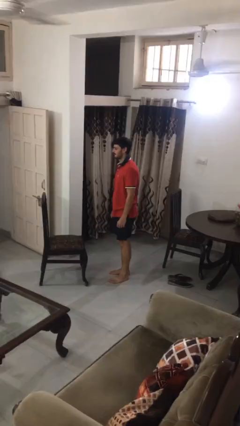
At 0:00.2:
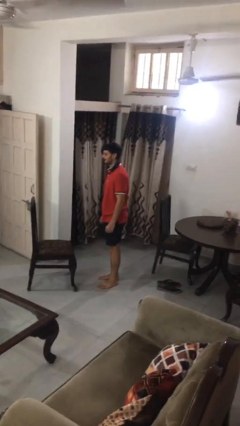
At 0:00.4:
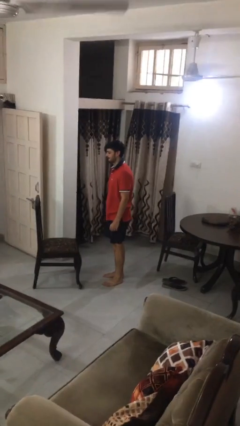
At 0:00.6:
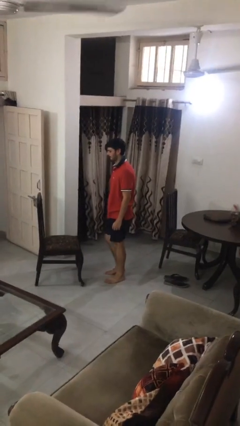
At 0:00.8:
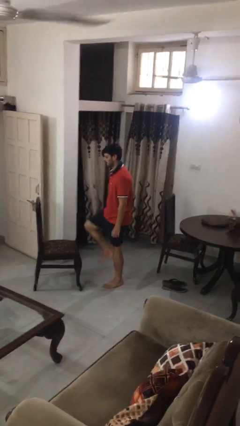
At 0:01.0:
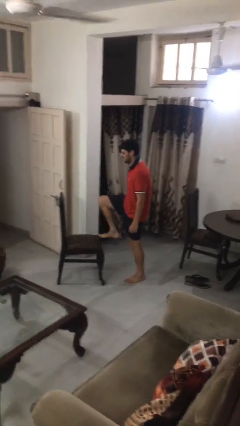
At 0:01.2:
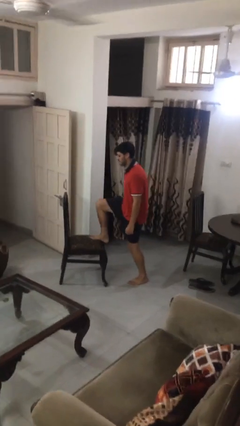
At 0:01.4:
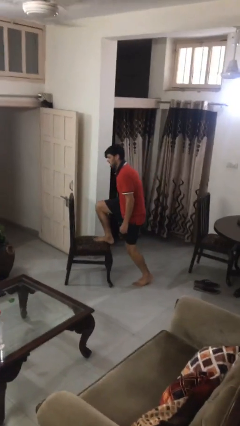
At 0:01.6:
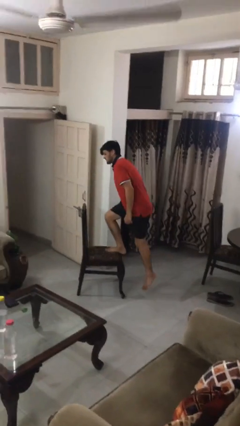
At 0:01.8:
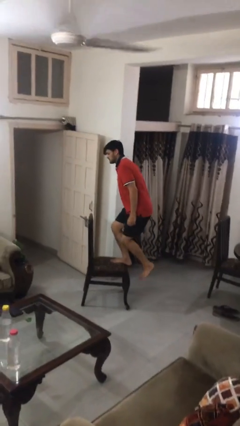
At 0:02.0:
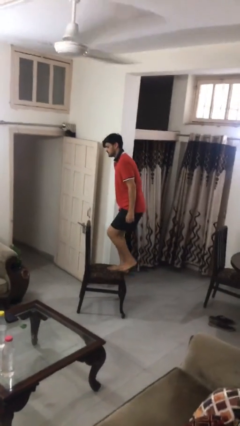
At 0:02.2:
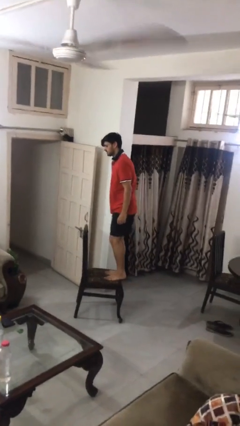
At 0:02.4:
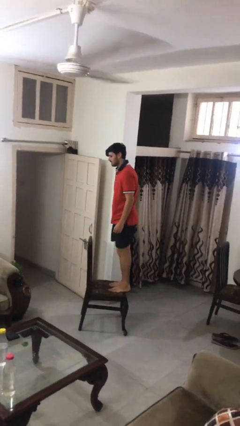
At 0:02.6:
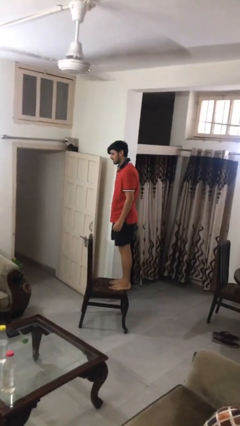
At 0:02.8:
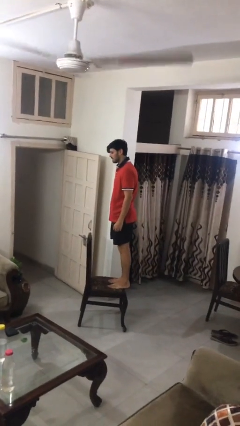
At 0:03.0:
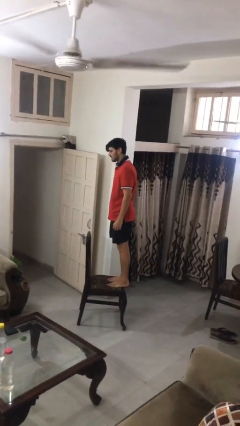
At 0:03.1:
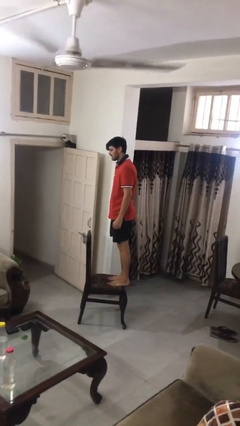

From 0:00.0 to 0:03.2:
person climbs on chair

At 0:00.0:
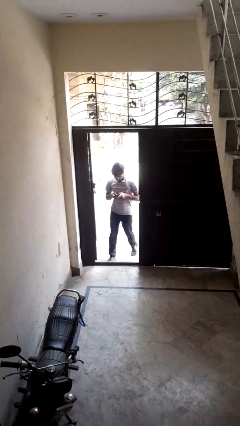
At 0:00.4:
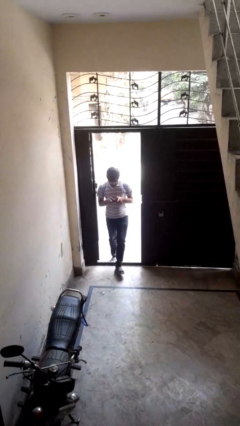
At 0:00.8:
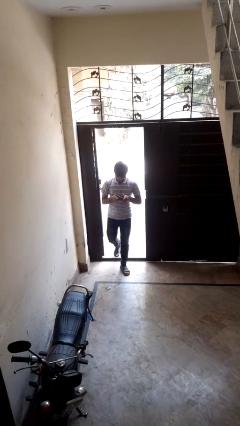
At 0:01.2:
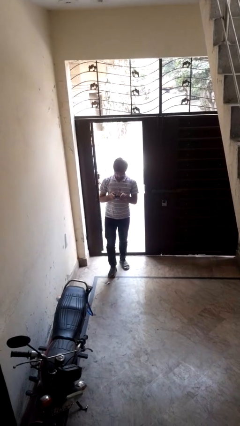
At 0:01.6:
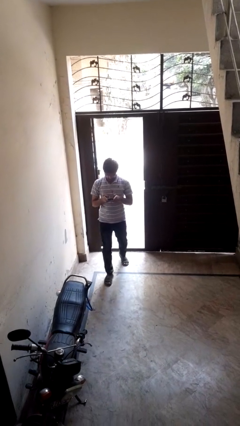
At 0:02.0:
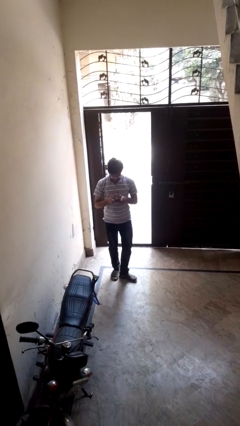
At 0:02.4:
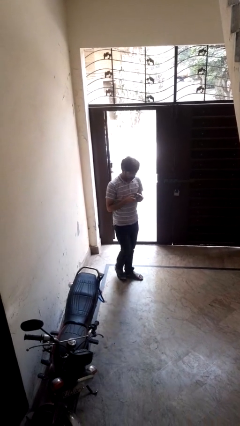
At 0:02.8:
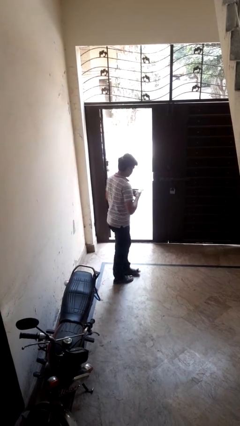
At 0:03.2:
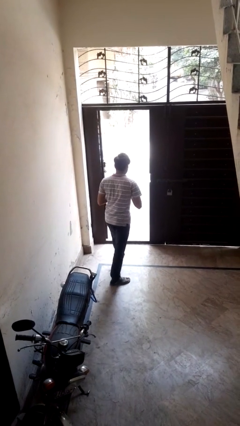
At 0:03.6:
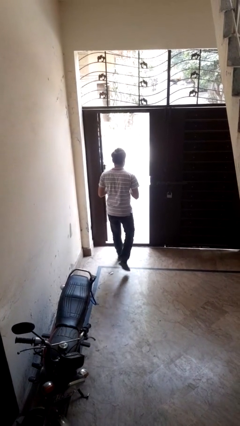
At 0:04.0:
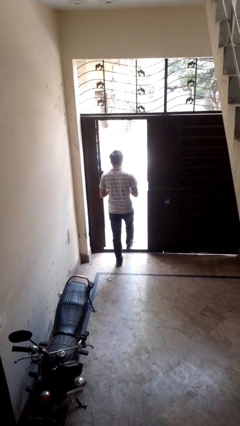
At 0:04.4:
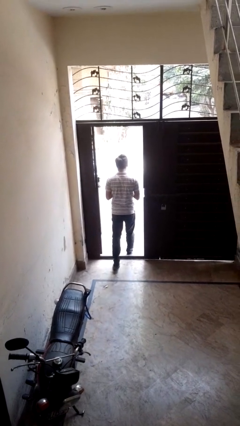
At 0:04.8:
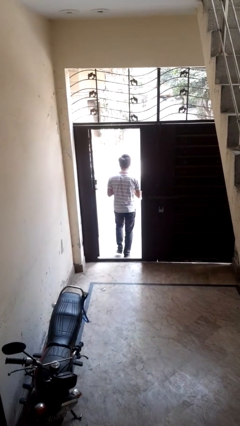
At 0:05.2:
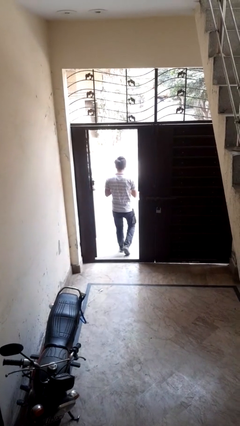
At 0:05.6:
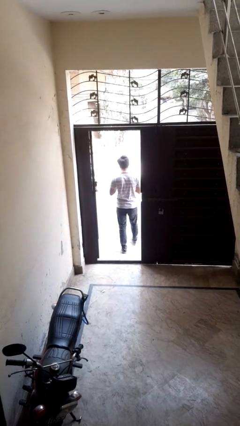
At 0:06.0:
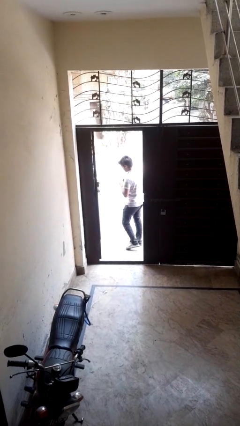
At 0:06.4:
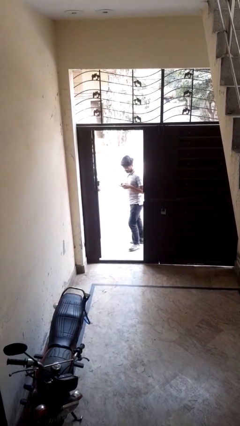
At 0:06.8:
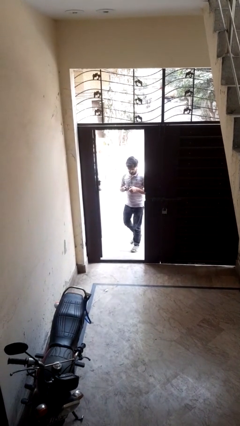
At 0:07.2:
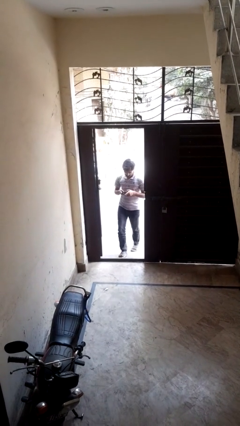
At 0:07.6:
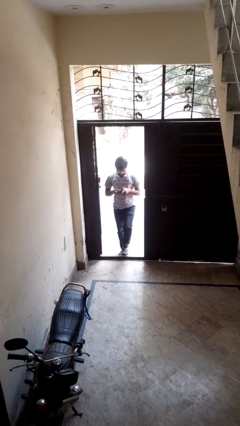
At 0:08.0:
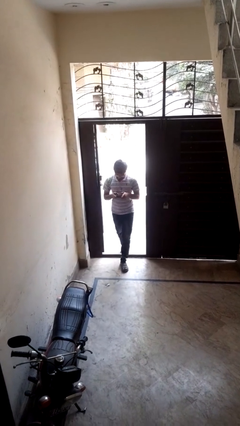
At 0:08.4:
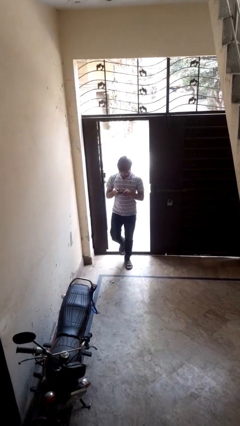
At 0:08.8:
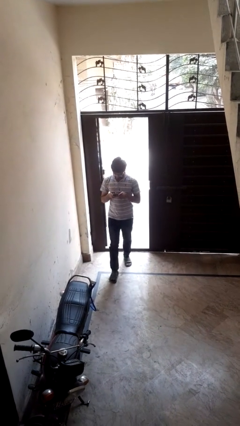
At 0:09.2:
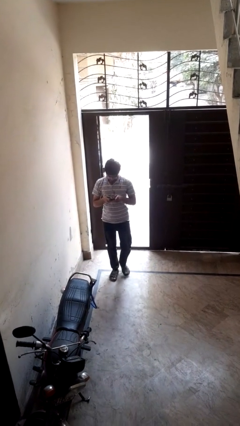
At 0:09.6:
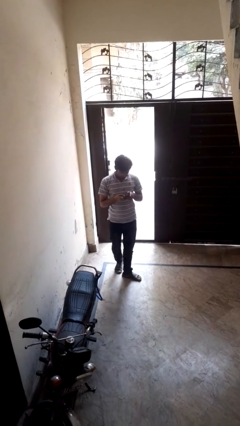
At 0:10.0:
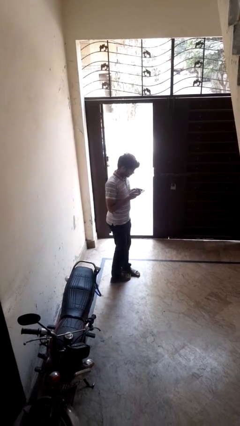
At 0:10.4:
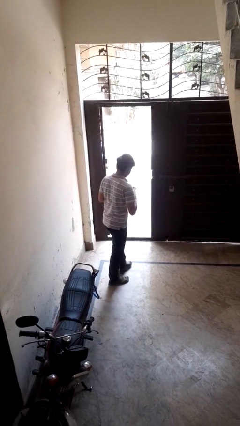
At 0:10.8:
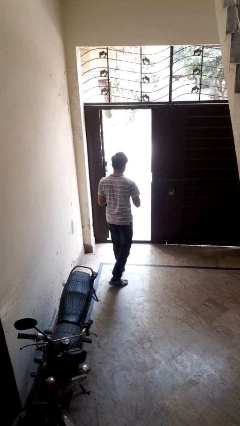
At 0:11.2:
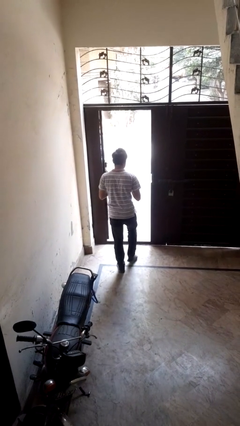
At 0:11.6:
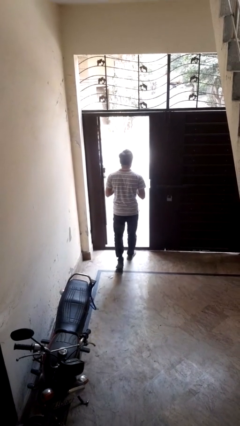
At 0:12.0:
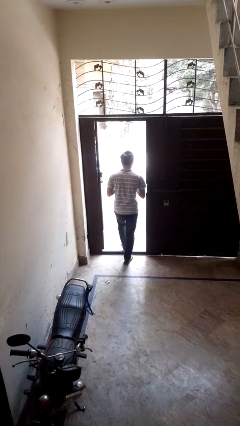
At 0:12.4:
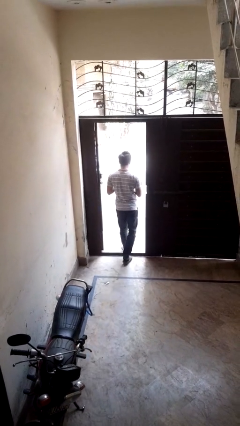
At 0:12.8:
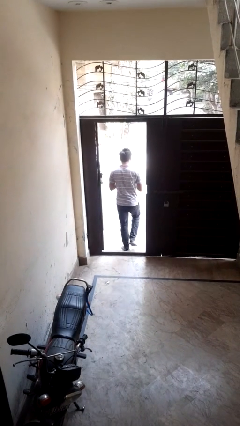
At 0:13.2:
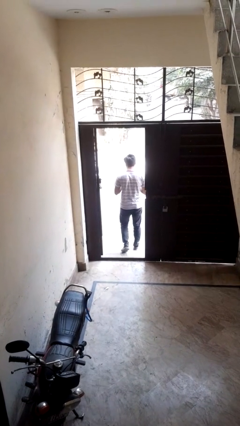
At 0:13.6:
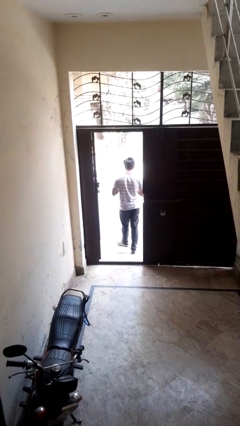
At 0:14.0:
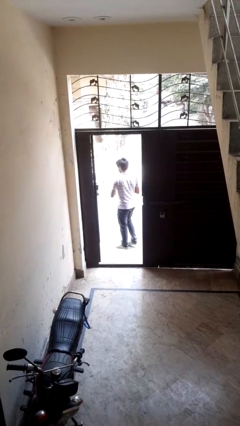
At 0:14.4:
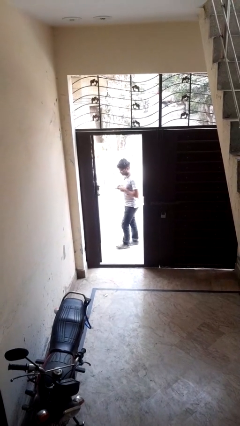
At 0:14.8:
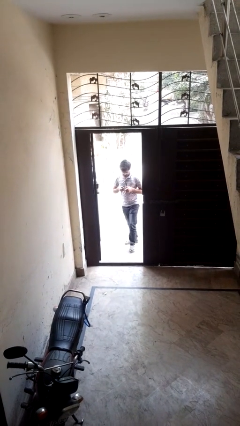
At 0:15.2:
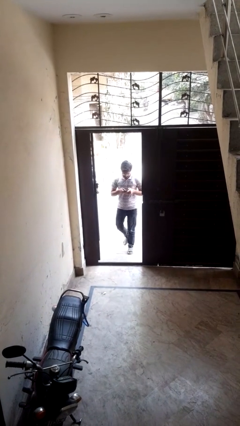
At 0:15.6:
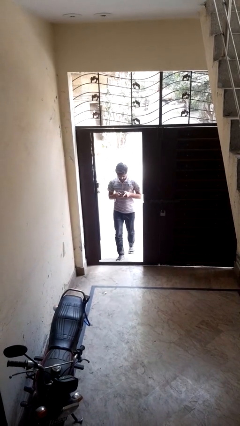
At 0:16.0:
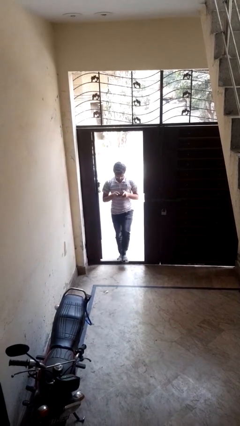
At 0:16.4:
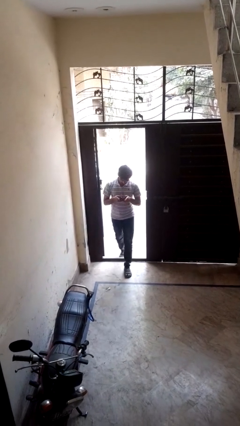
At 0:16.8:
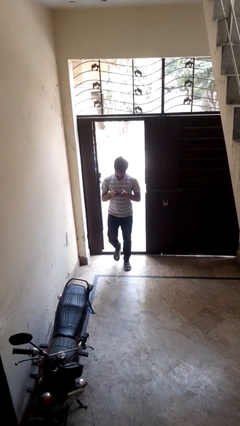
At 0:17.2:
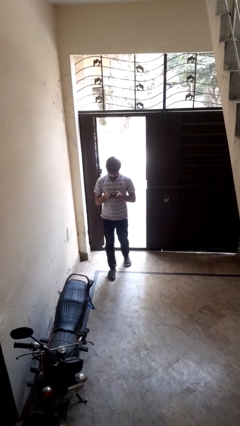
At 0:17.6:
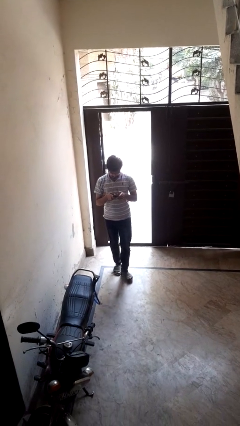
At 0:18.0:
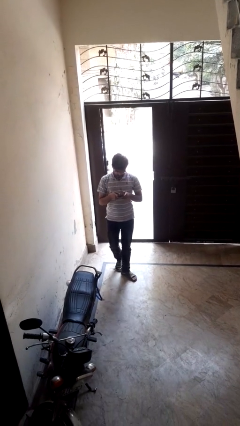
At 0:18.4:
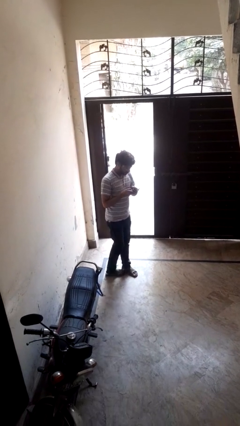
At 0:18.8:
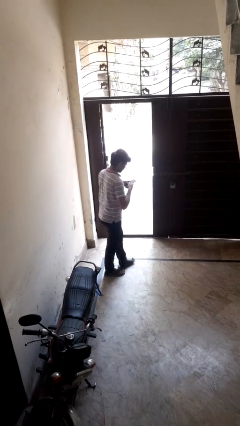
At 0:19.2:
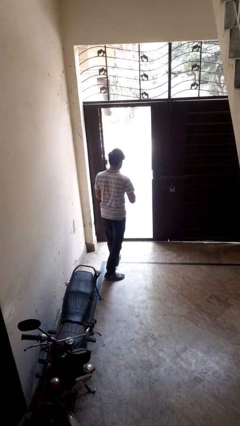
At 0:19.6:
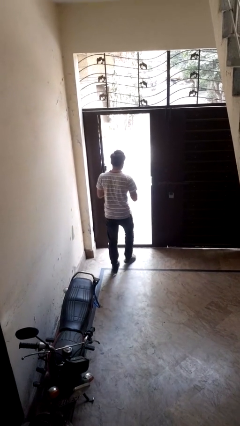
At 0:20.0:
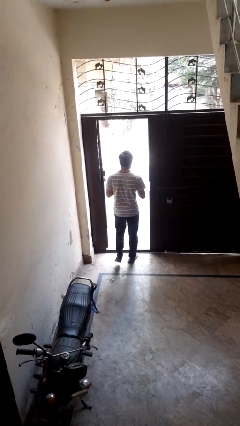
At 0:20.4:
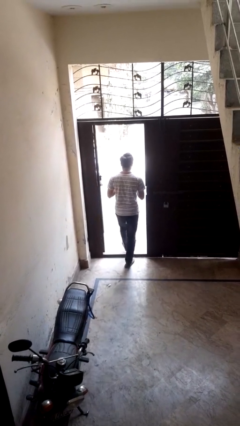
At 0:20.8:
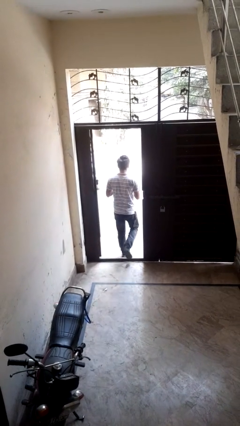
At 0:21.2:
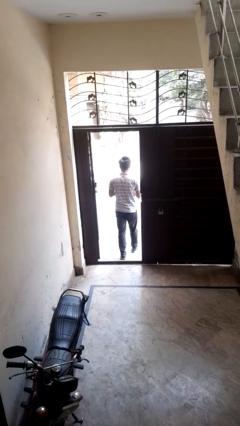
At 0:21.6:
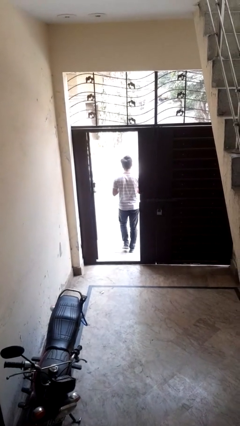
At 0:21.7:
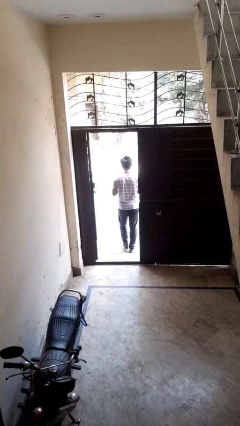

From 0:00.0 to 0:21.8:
person texts on phone

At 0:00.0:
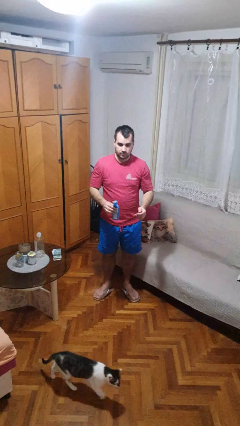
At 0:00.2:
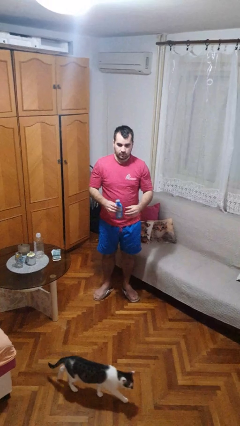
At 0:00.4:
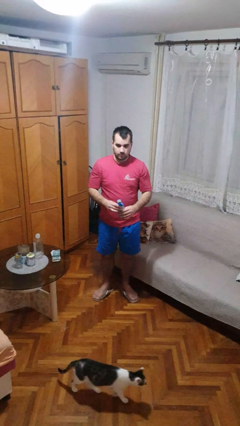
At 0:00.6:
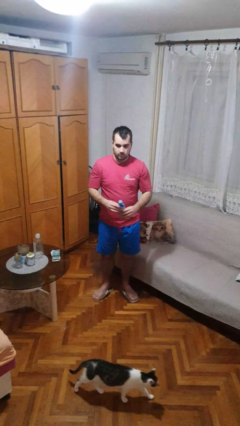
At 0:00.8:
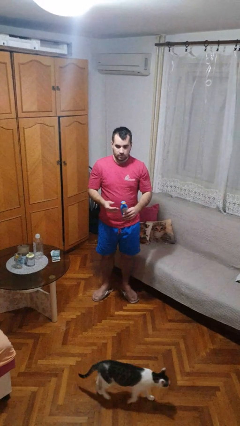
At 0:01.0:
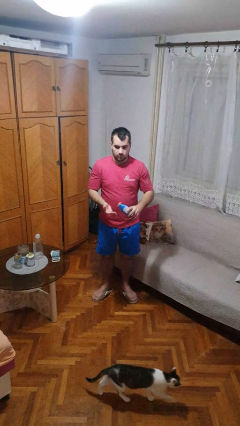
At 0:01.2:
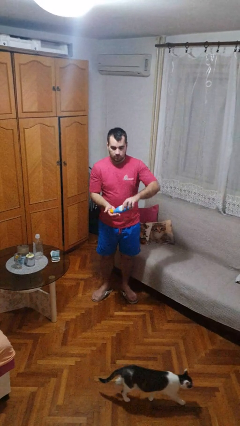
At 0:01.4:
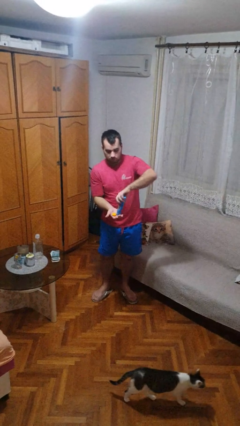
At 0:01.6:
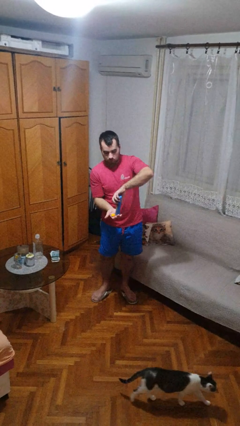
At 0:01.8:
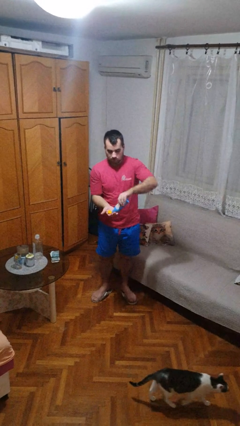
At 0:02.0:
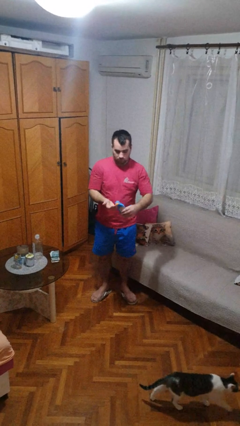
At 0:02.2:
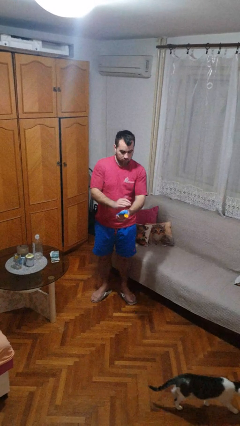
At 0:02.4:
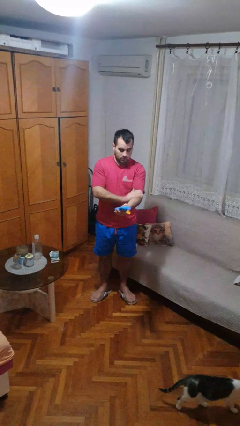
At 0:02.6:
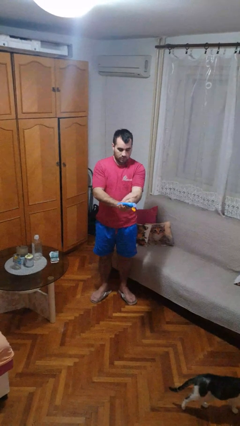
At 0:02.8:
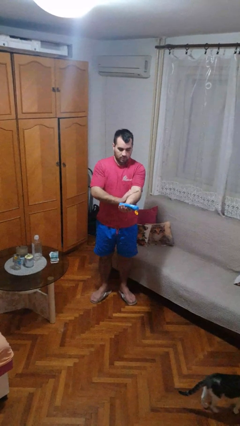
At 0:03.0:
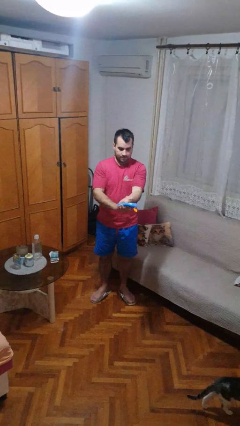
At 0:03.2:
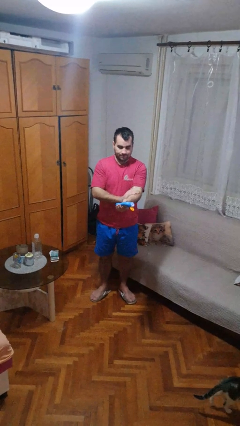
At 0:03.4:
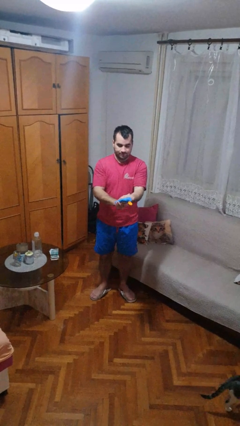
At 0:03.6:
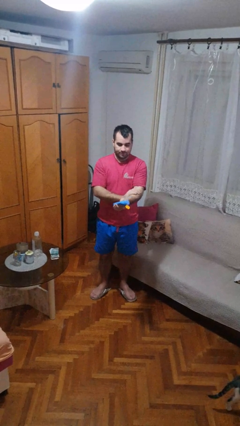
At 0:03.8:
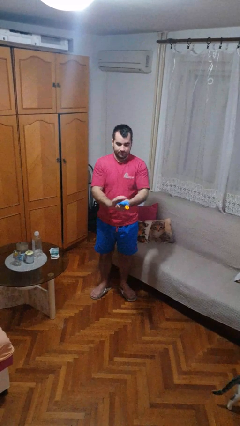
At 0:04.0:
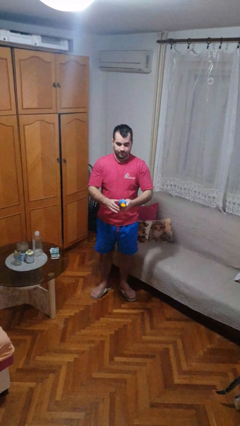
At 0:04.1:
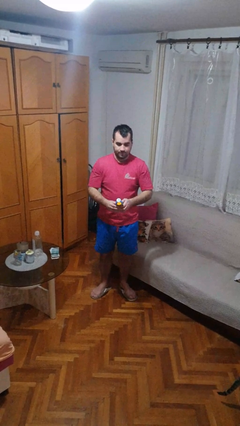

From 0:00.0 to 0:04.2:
person applies sunscreen
